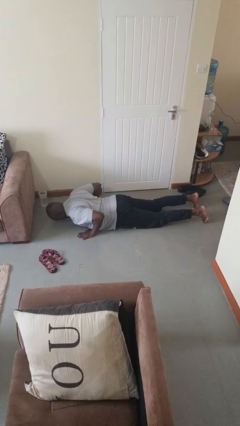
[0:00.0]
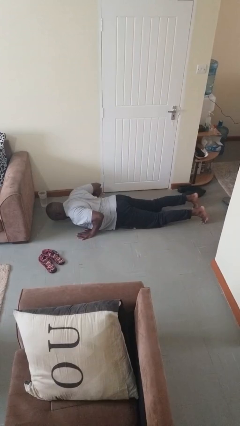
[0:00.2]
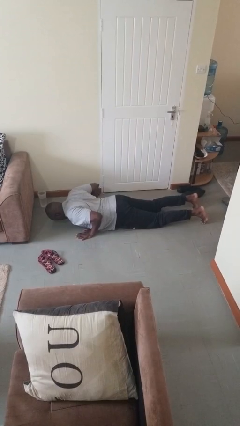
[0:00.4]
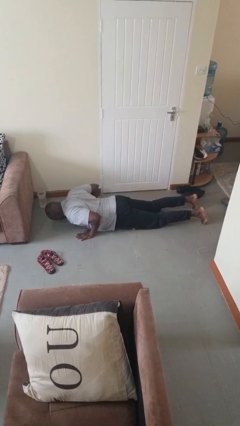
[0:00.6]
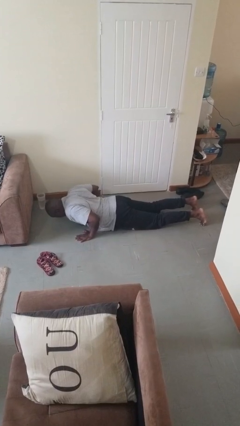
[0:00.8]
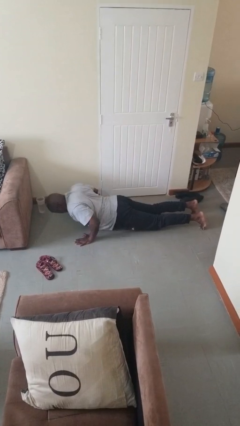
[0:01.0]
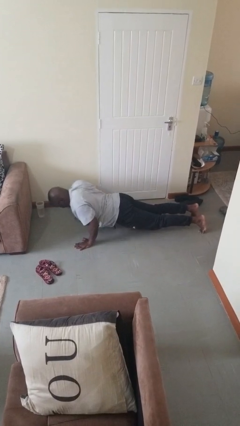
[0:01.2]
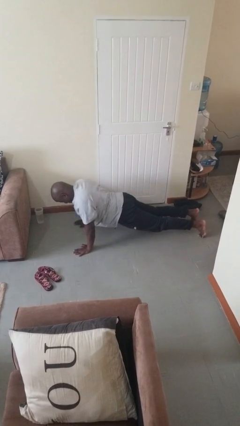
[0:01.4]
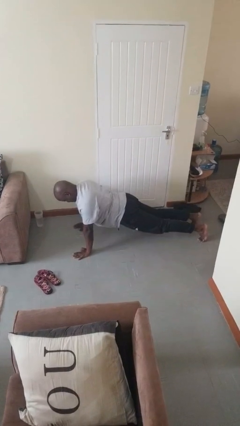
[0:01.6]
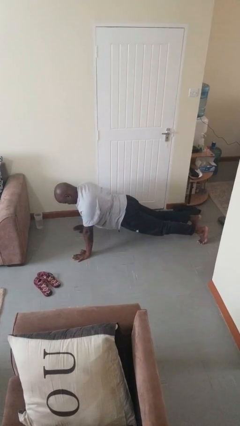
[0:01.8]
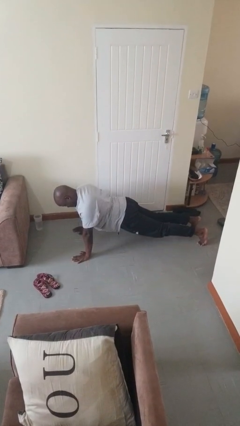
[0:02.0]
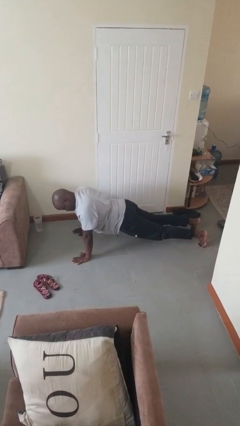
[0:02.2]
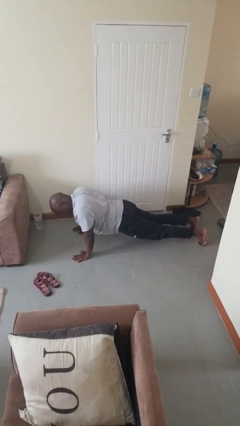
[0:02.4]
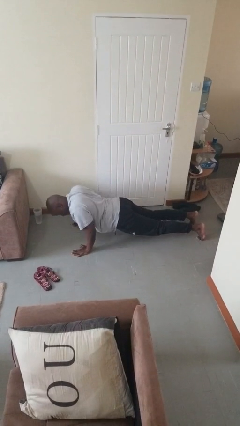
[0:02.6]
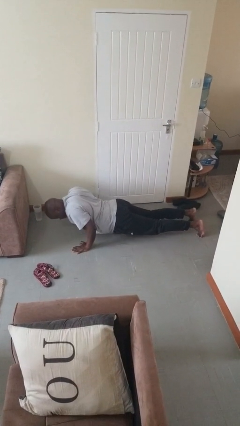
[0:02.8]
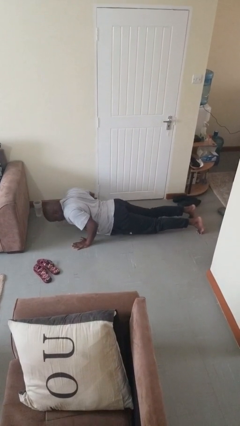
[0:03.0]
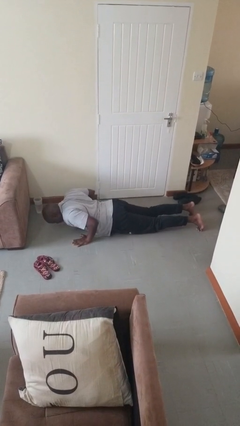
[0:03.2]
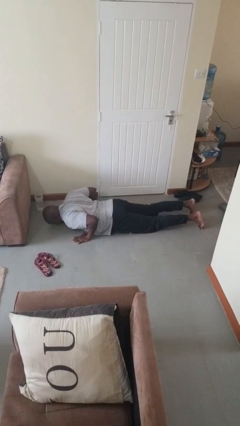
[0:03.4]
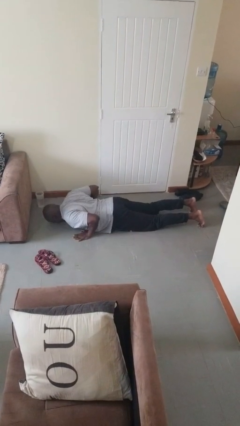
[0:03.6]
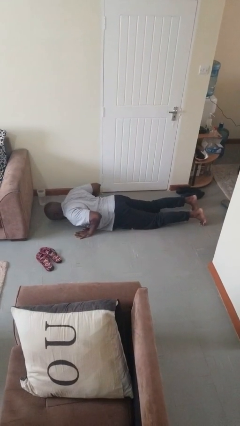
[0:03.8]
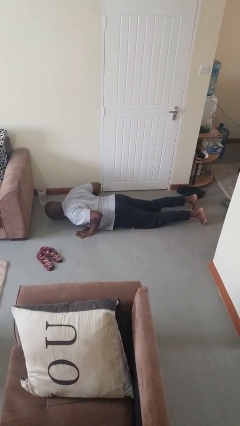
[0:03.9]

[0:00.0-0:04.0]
person exercises with pushup

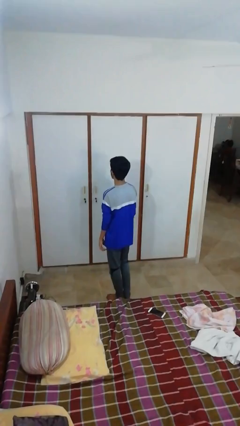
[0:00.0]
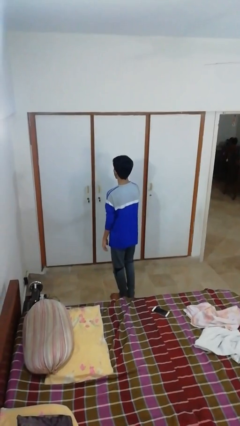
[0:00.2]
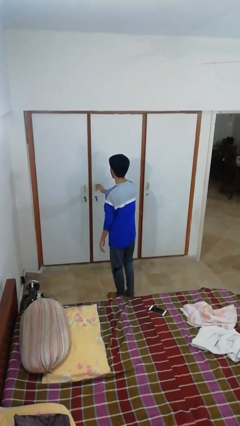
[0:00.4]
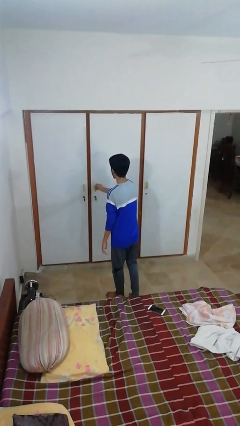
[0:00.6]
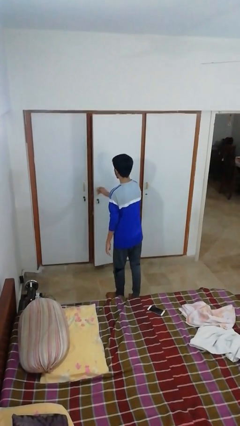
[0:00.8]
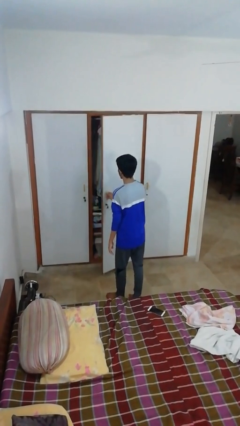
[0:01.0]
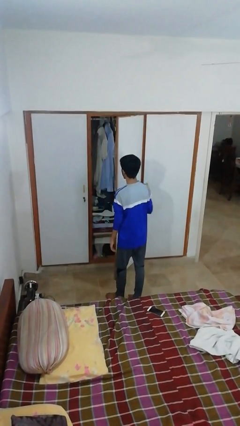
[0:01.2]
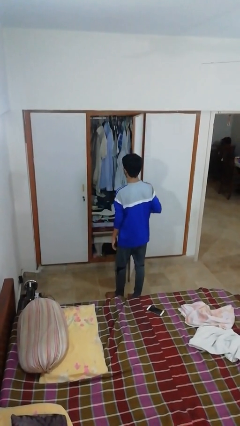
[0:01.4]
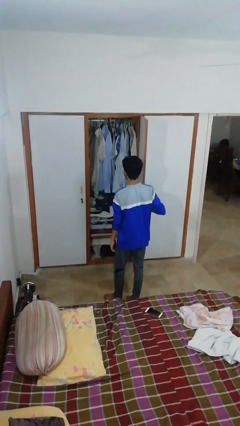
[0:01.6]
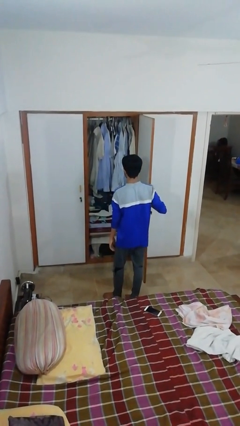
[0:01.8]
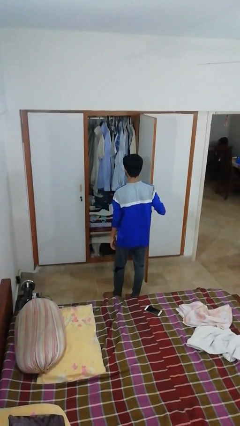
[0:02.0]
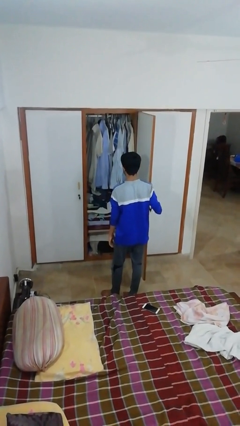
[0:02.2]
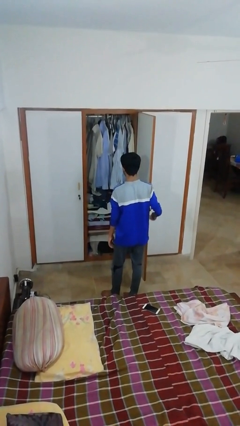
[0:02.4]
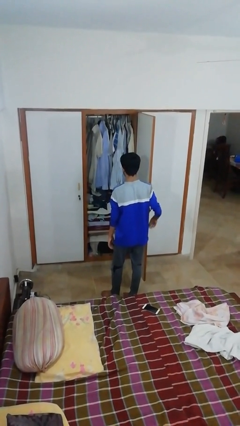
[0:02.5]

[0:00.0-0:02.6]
person opens closet door

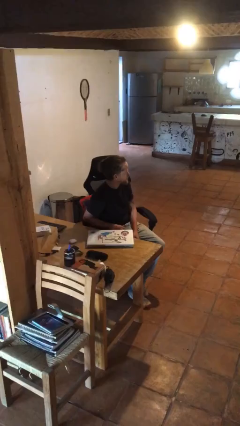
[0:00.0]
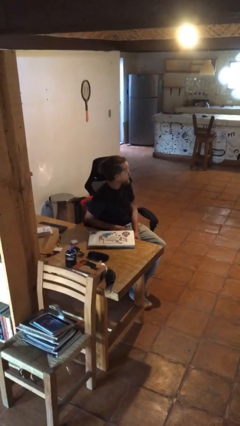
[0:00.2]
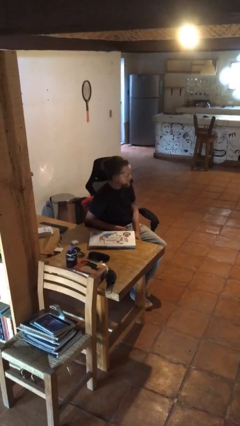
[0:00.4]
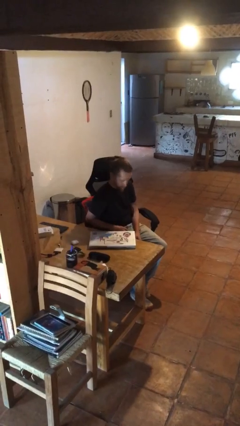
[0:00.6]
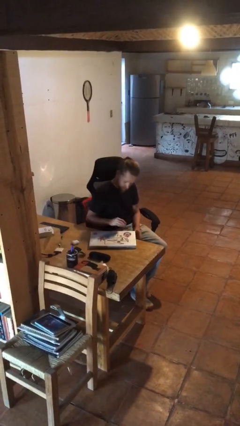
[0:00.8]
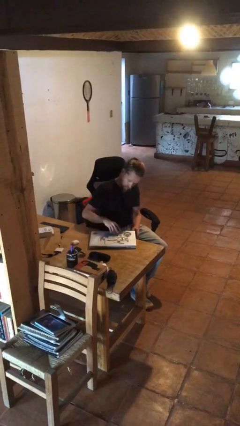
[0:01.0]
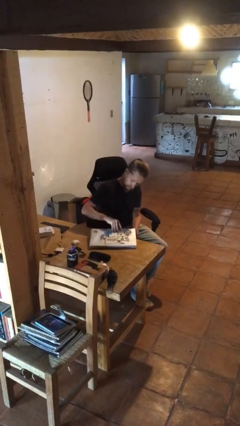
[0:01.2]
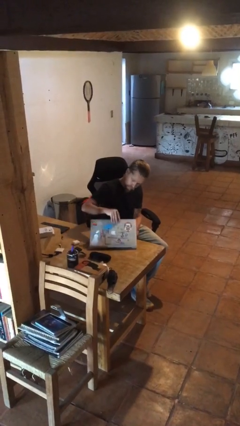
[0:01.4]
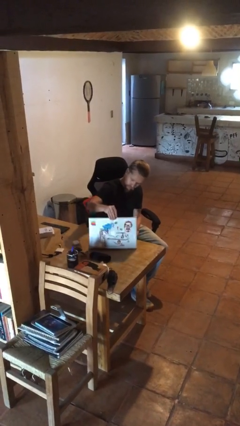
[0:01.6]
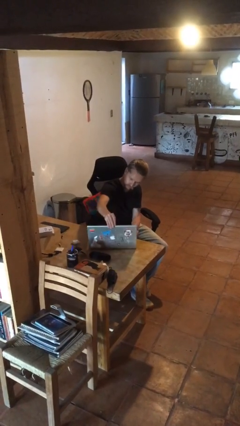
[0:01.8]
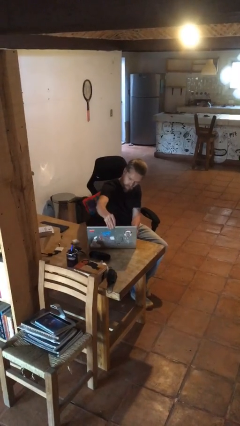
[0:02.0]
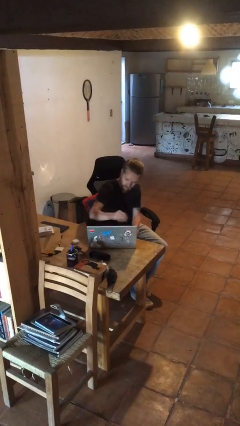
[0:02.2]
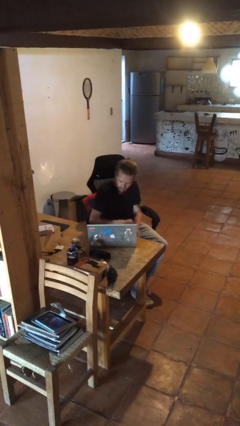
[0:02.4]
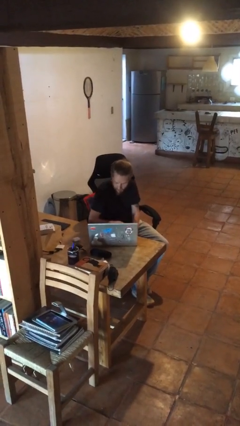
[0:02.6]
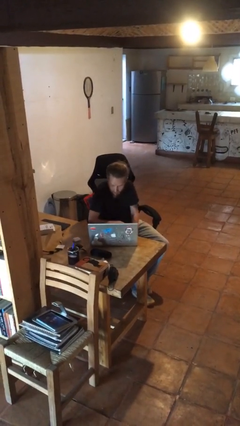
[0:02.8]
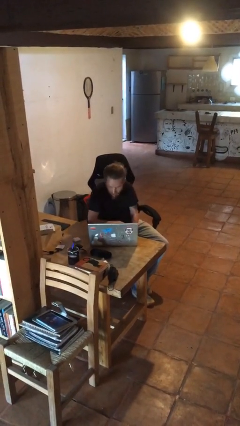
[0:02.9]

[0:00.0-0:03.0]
person opens laptop

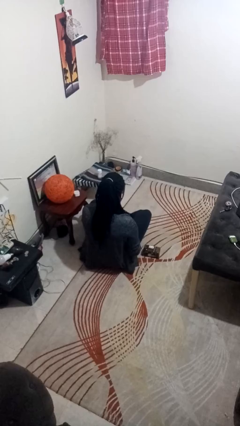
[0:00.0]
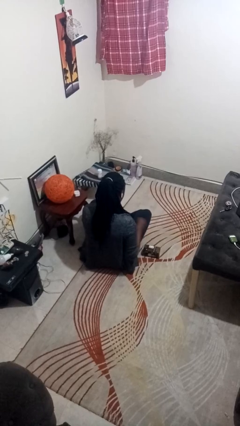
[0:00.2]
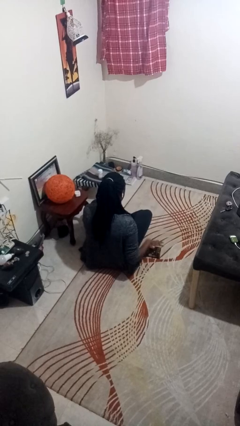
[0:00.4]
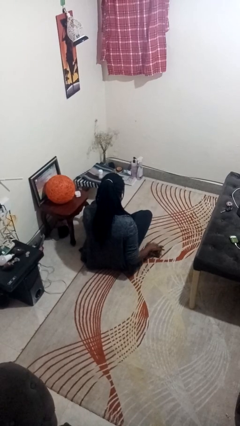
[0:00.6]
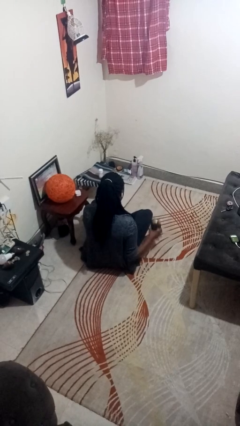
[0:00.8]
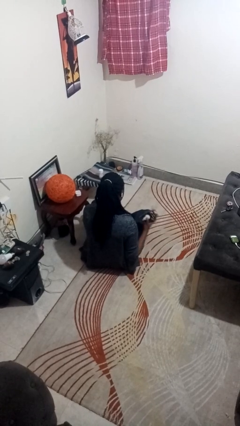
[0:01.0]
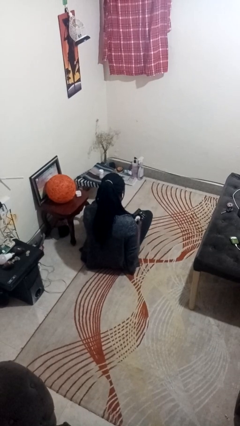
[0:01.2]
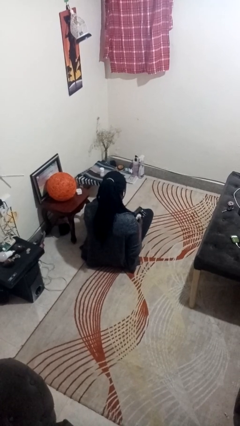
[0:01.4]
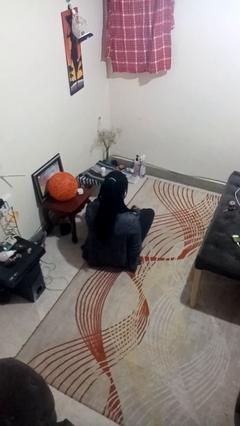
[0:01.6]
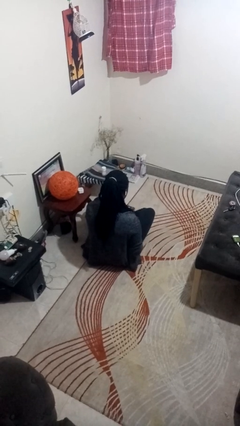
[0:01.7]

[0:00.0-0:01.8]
person picks up object from floor

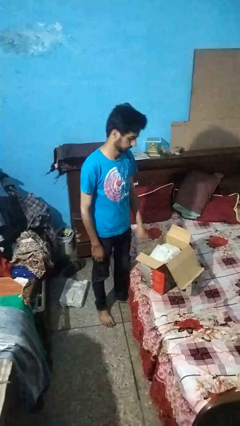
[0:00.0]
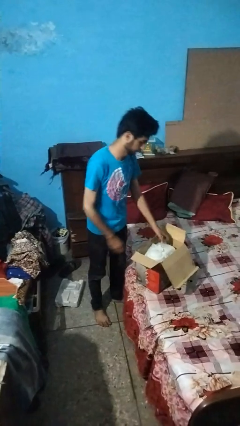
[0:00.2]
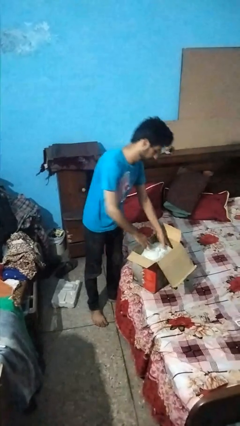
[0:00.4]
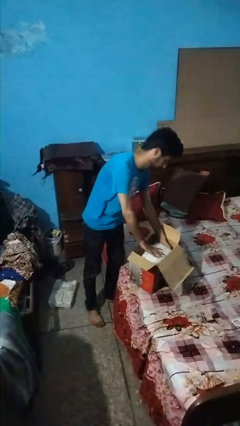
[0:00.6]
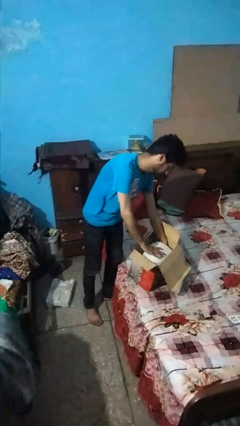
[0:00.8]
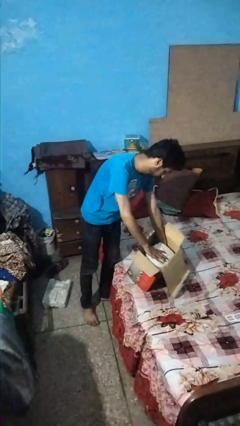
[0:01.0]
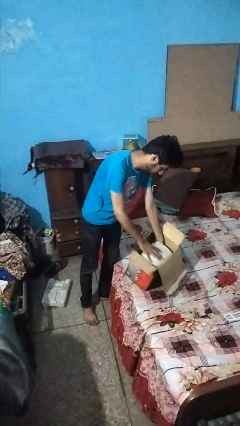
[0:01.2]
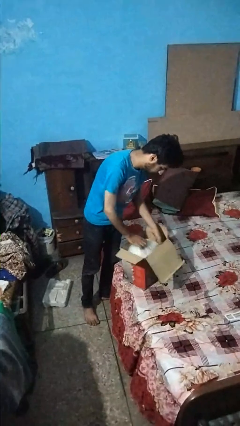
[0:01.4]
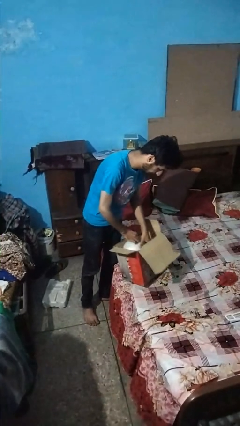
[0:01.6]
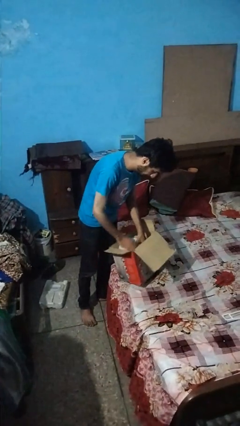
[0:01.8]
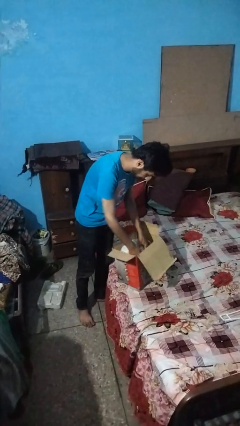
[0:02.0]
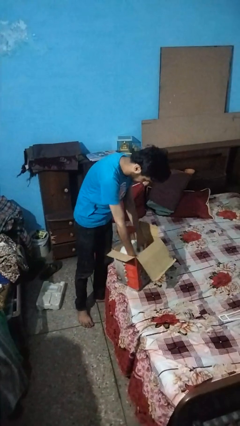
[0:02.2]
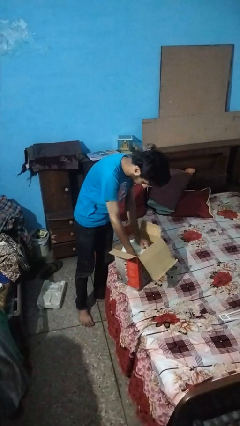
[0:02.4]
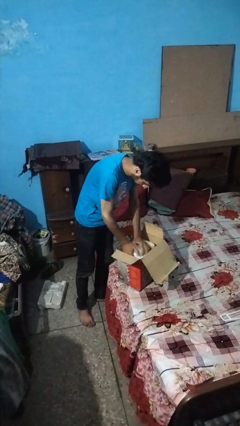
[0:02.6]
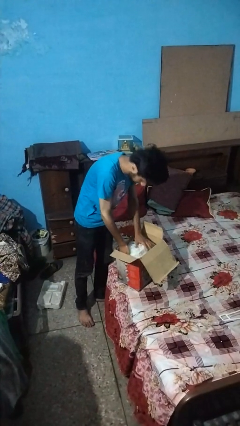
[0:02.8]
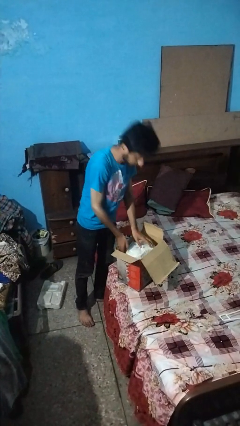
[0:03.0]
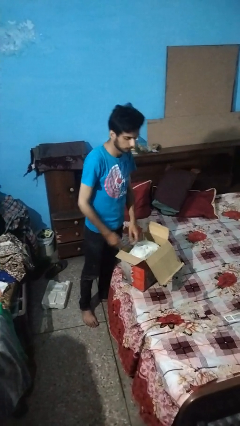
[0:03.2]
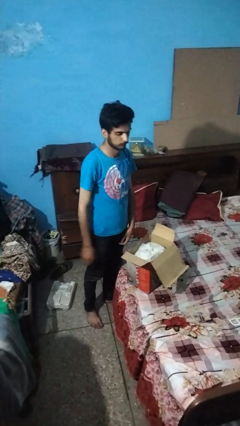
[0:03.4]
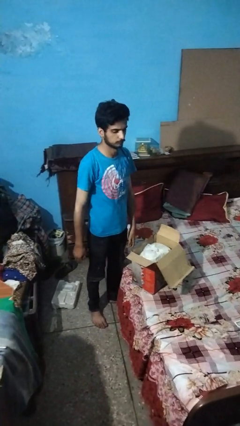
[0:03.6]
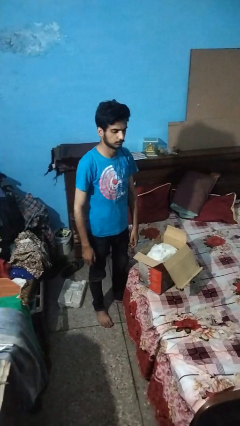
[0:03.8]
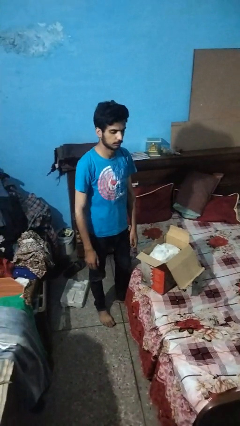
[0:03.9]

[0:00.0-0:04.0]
person searches in box

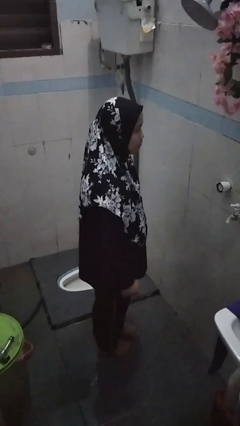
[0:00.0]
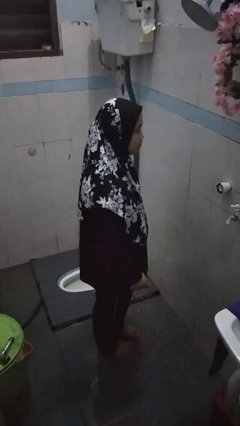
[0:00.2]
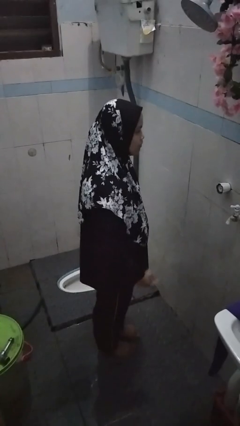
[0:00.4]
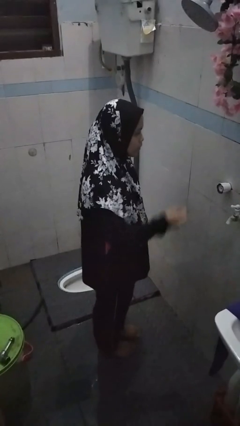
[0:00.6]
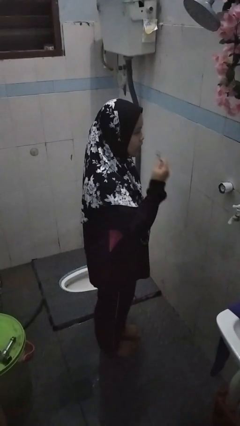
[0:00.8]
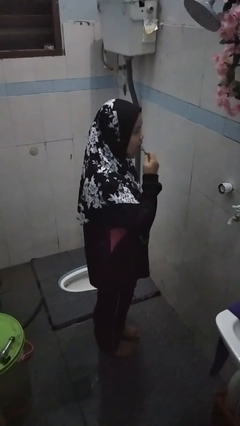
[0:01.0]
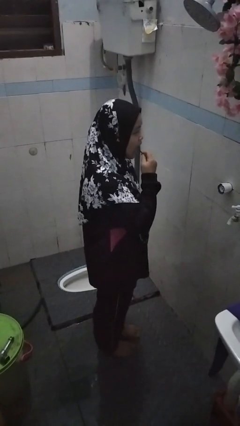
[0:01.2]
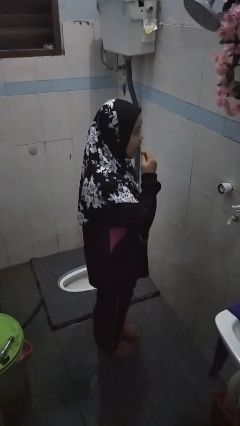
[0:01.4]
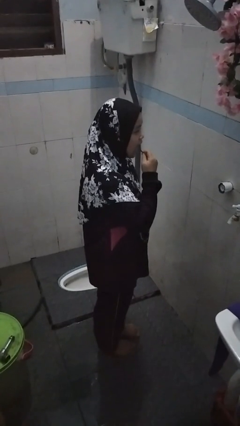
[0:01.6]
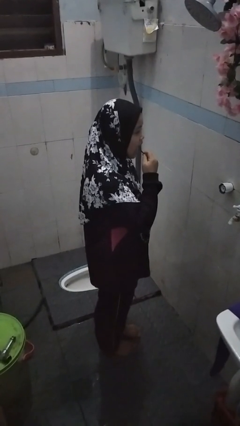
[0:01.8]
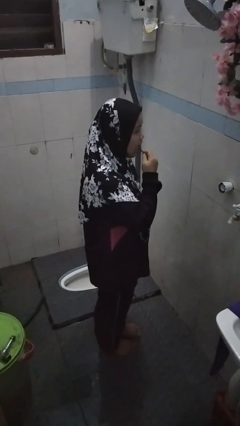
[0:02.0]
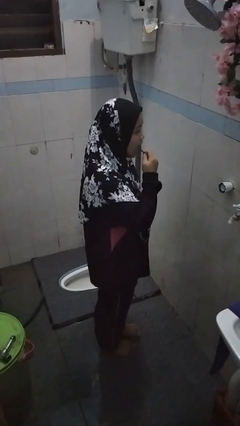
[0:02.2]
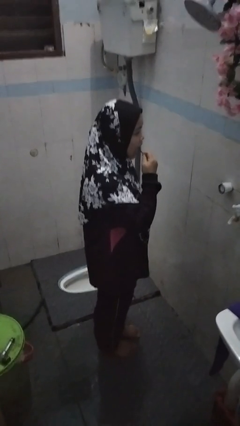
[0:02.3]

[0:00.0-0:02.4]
person flosses
